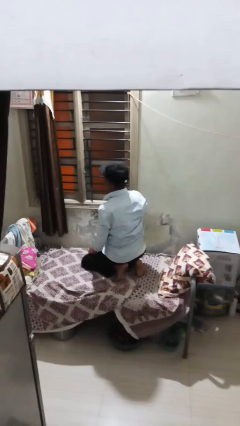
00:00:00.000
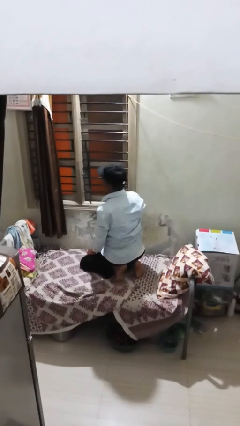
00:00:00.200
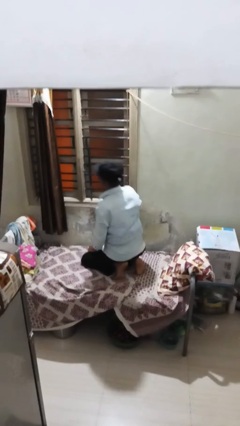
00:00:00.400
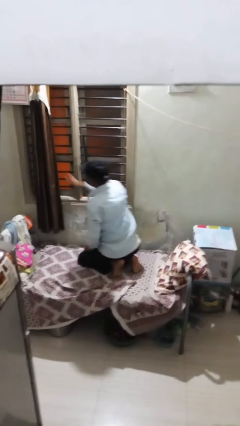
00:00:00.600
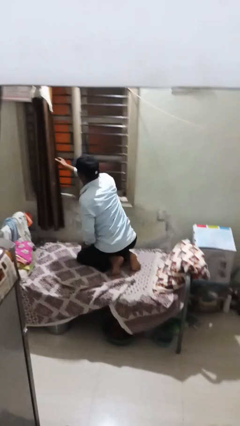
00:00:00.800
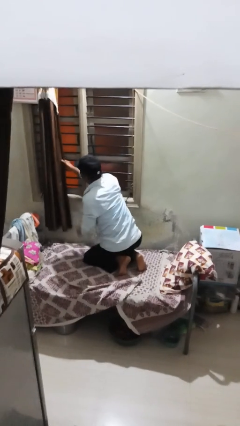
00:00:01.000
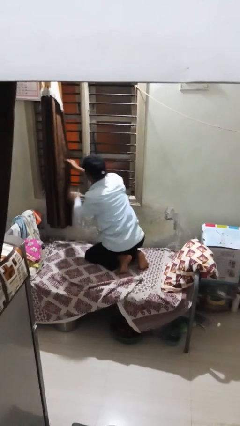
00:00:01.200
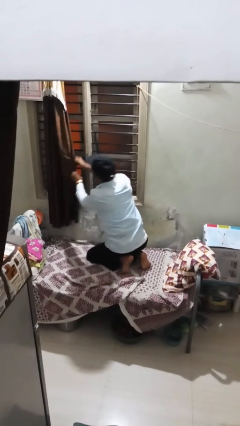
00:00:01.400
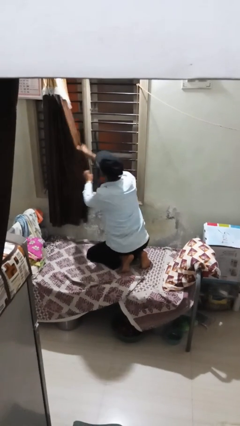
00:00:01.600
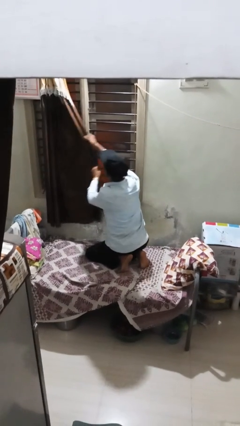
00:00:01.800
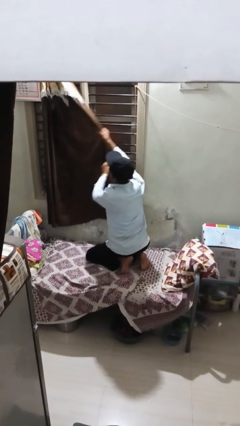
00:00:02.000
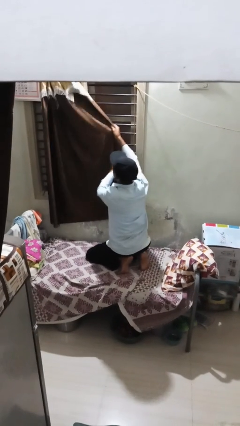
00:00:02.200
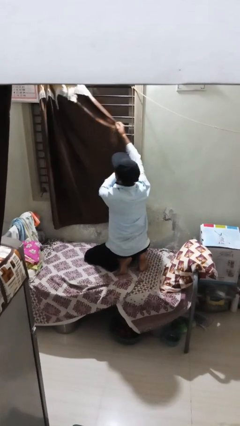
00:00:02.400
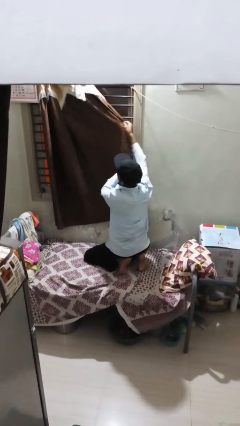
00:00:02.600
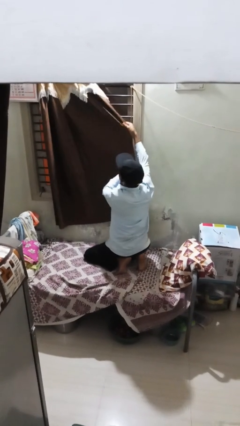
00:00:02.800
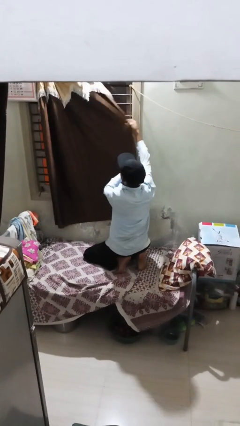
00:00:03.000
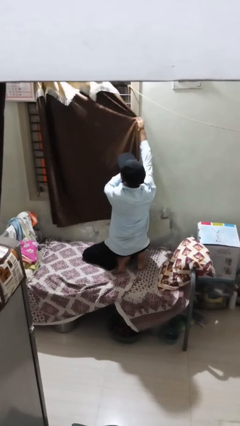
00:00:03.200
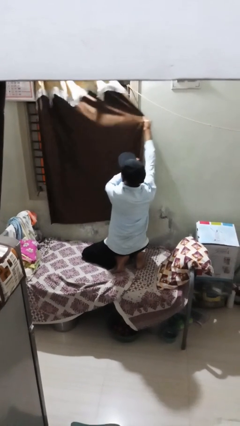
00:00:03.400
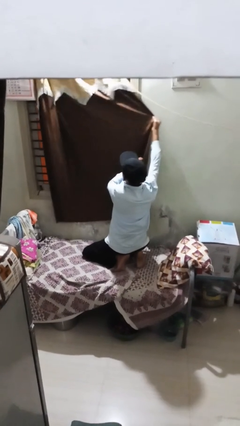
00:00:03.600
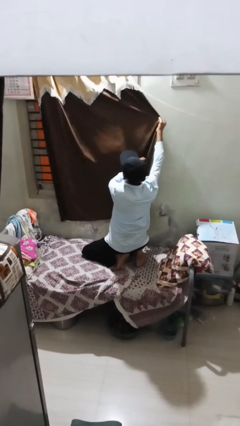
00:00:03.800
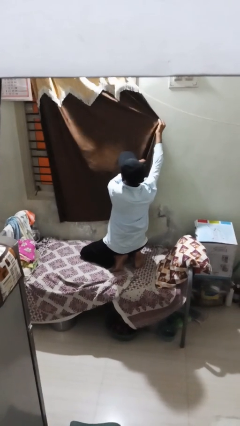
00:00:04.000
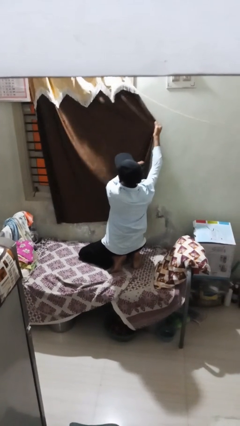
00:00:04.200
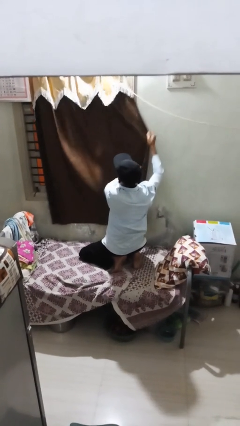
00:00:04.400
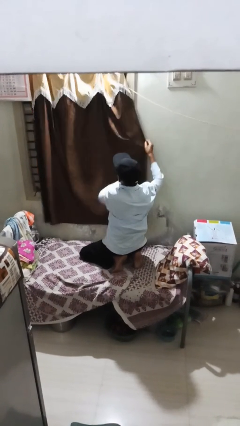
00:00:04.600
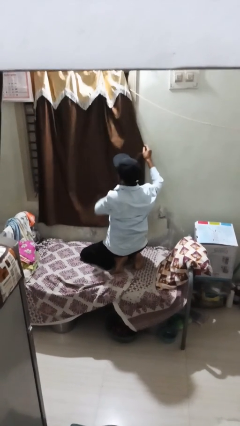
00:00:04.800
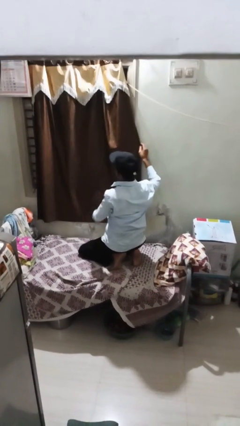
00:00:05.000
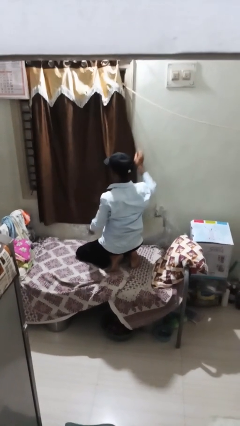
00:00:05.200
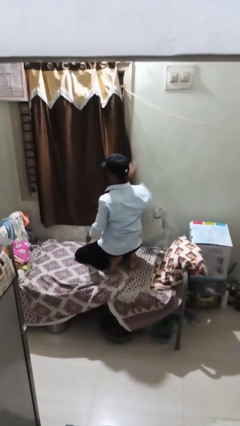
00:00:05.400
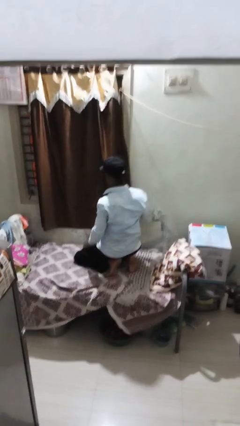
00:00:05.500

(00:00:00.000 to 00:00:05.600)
person closes curtains

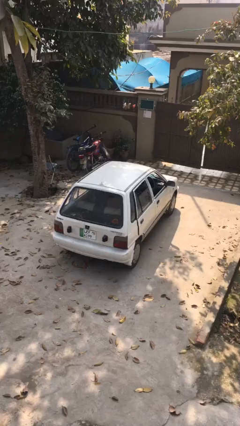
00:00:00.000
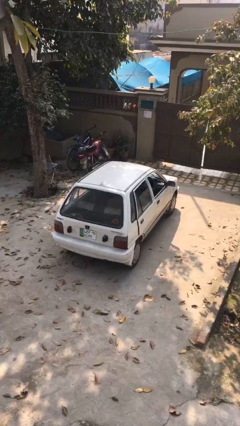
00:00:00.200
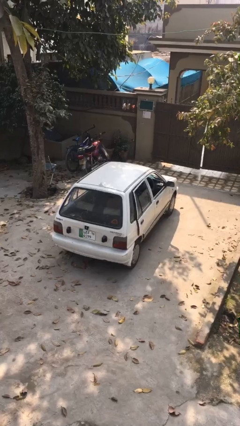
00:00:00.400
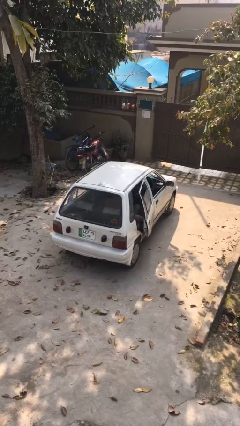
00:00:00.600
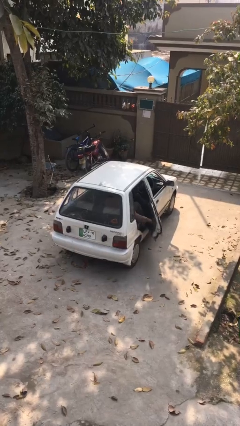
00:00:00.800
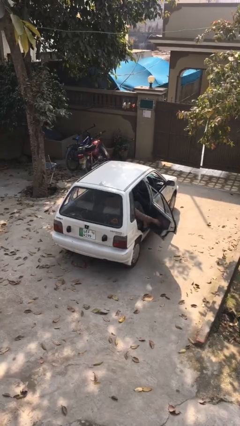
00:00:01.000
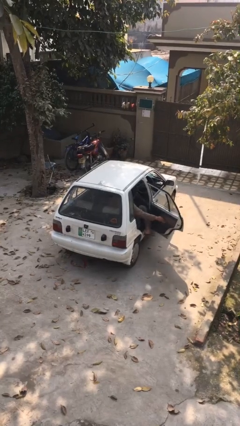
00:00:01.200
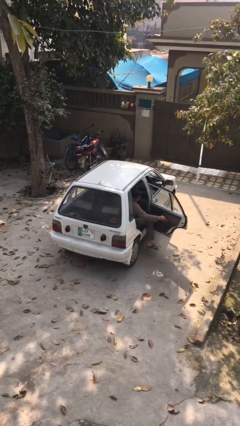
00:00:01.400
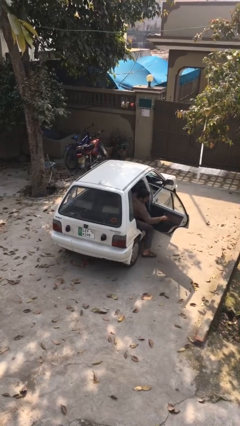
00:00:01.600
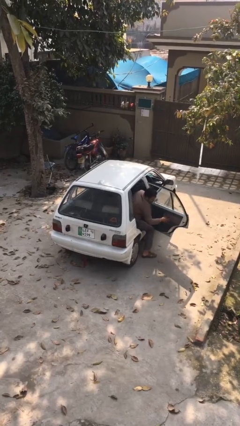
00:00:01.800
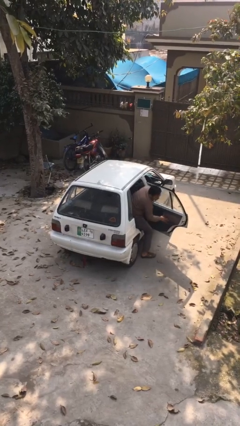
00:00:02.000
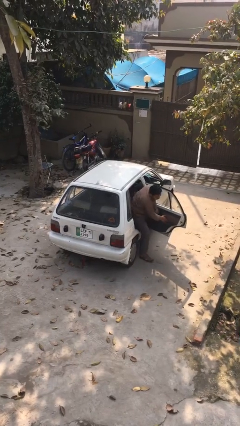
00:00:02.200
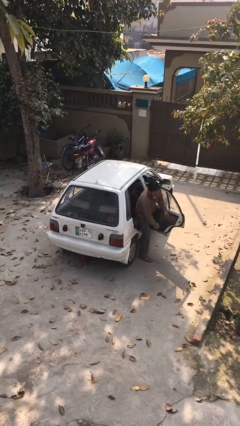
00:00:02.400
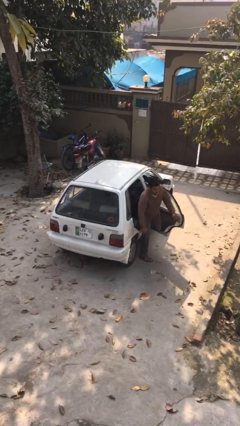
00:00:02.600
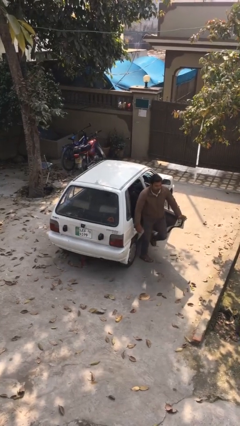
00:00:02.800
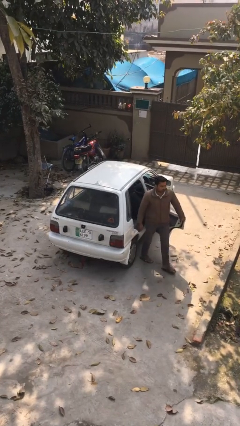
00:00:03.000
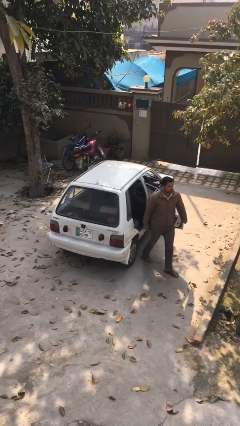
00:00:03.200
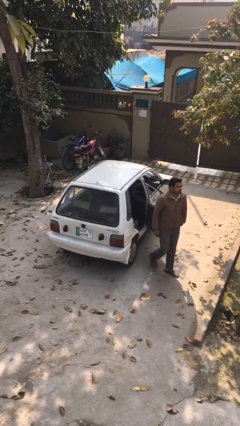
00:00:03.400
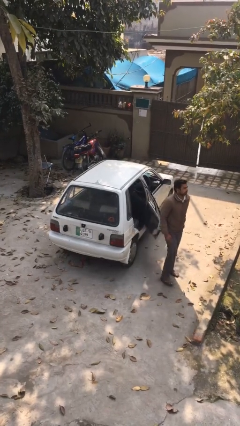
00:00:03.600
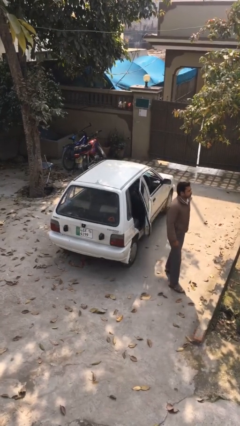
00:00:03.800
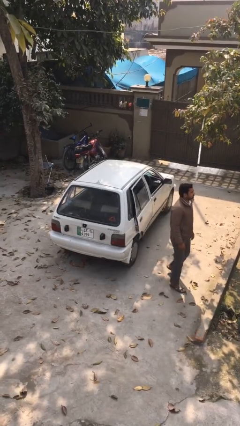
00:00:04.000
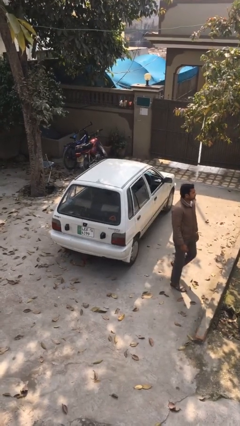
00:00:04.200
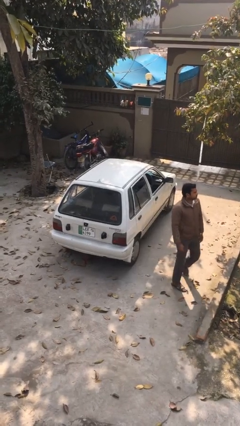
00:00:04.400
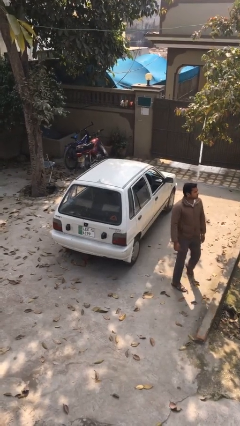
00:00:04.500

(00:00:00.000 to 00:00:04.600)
car drops off person

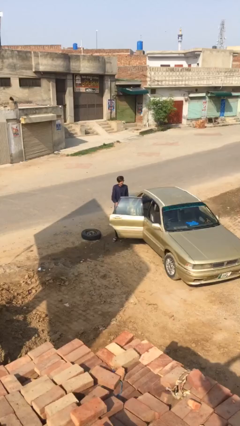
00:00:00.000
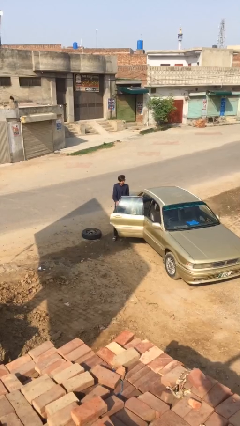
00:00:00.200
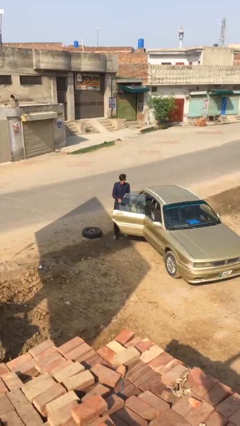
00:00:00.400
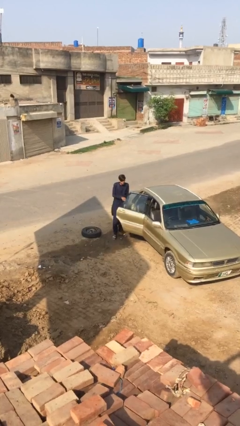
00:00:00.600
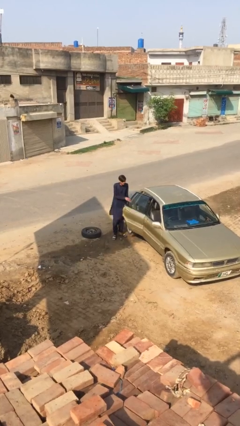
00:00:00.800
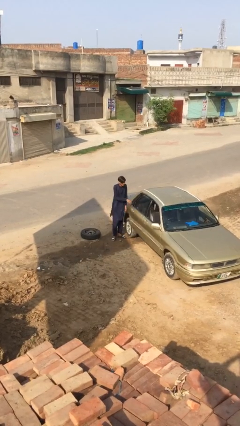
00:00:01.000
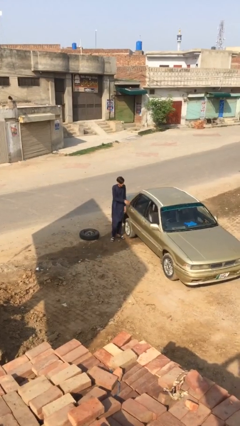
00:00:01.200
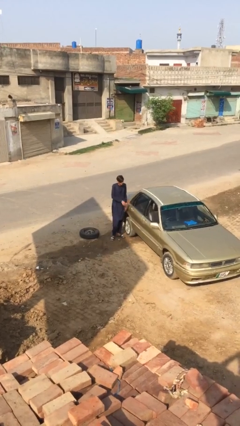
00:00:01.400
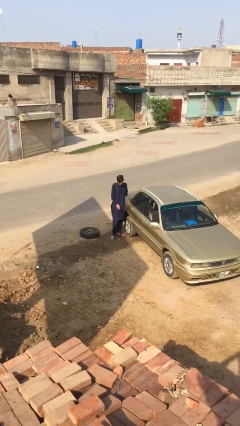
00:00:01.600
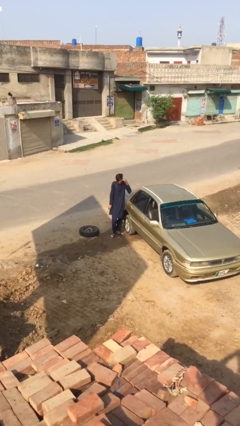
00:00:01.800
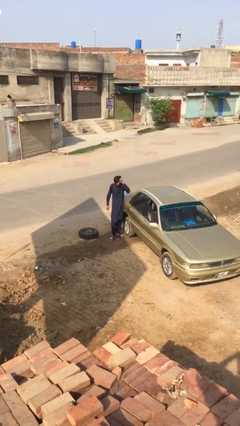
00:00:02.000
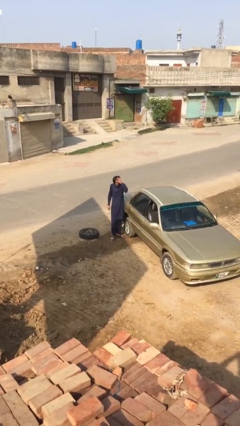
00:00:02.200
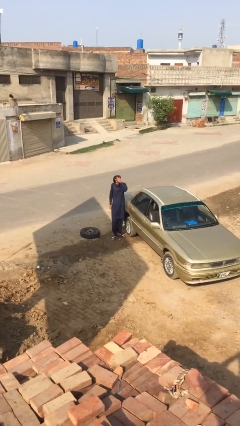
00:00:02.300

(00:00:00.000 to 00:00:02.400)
person closes car door

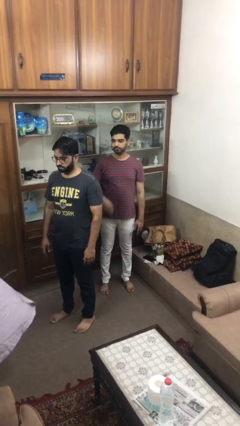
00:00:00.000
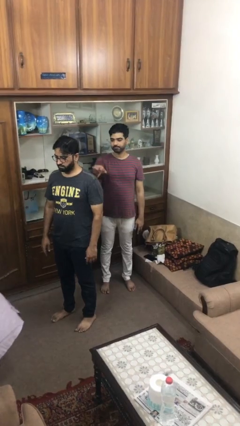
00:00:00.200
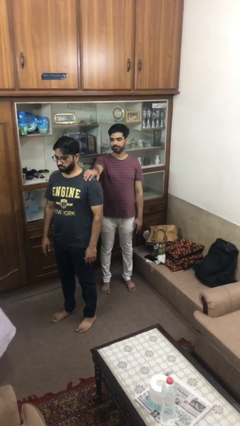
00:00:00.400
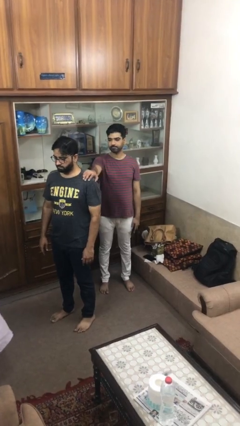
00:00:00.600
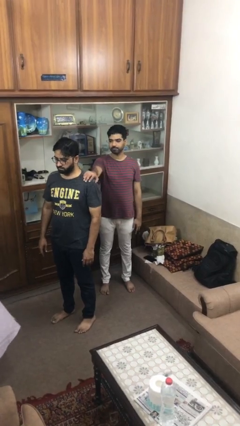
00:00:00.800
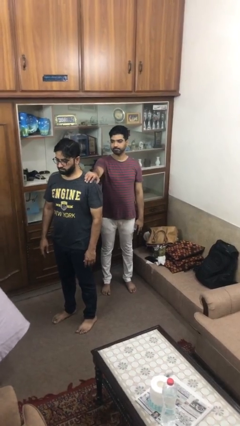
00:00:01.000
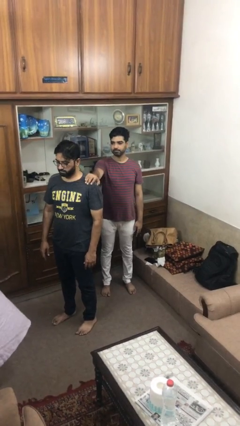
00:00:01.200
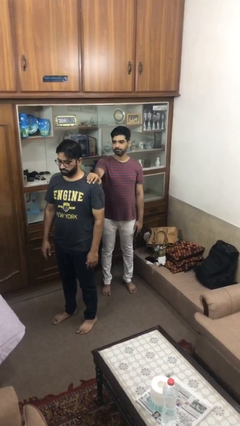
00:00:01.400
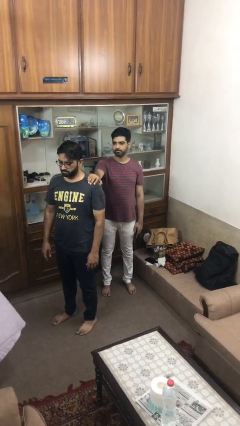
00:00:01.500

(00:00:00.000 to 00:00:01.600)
person grabs person by shoulder

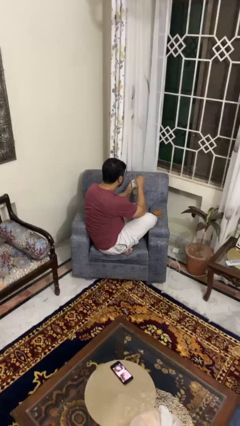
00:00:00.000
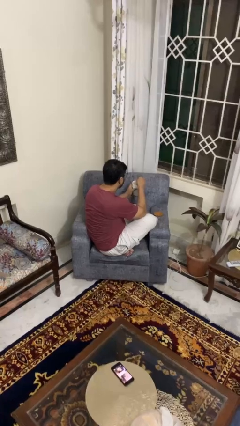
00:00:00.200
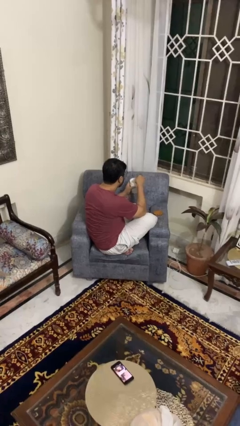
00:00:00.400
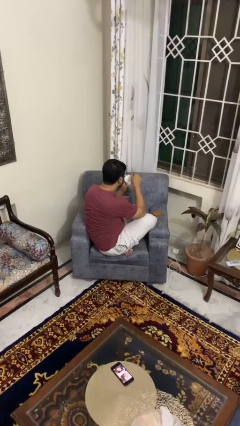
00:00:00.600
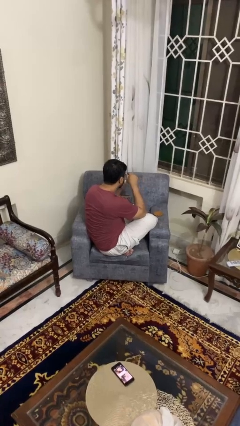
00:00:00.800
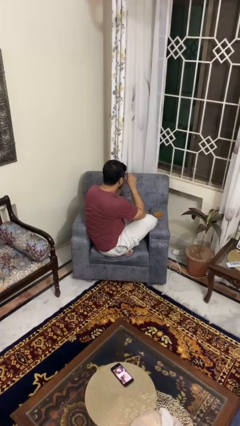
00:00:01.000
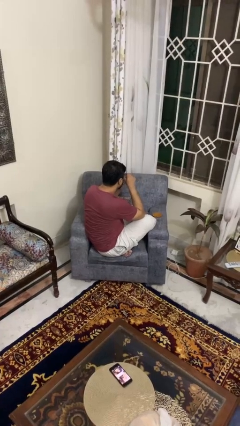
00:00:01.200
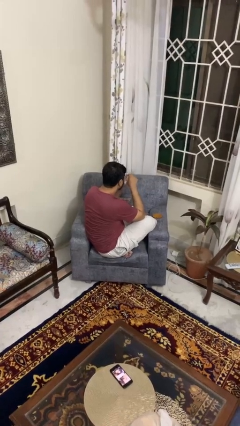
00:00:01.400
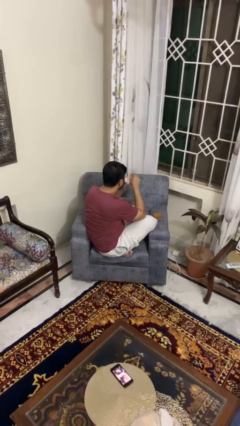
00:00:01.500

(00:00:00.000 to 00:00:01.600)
person drinks from mug

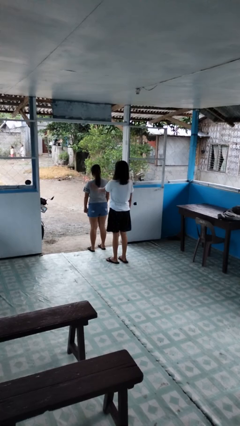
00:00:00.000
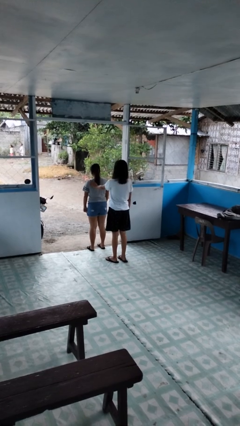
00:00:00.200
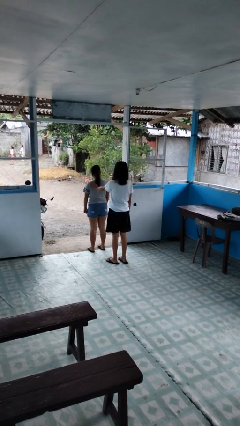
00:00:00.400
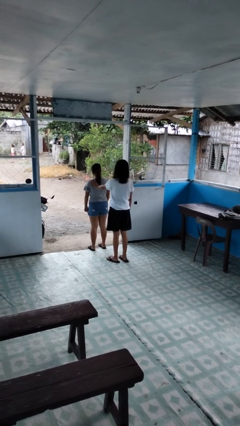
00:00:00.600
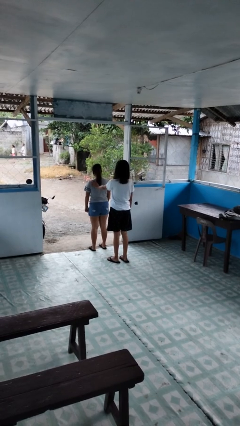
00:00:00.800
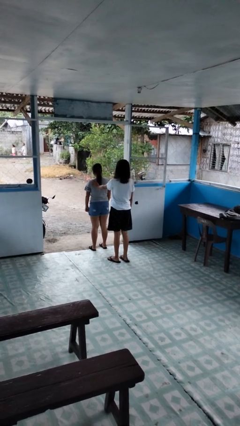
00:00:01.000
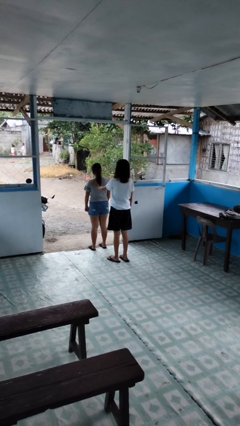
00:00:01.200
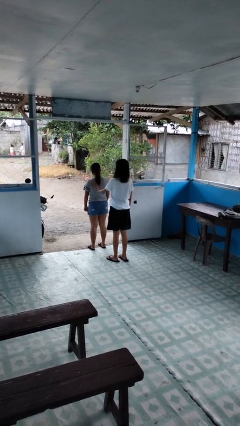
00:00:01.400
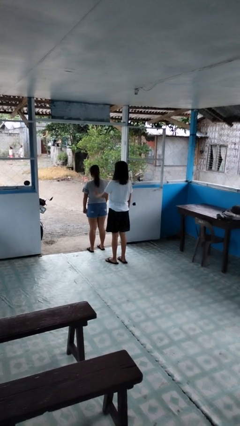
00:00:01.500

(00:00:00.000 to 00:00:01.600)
person touches back of person
